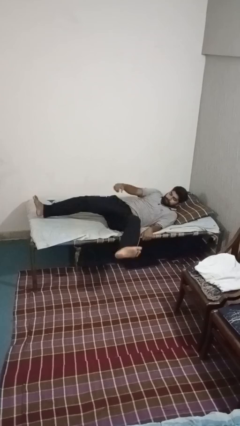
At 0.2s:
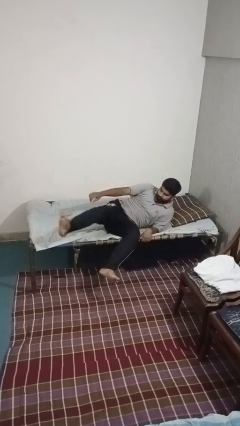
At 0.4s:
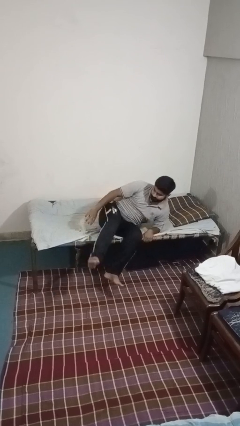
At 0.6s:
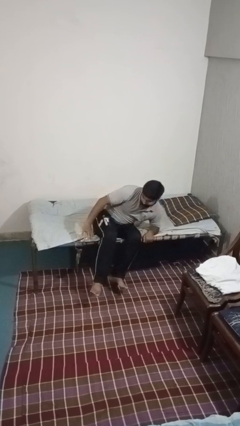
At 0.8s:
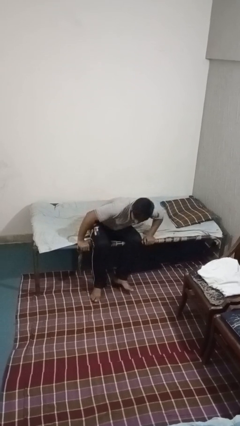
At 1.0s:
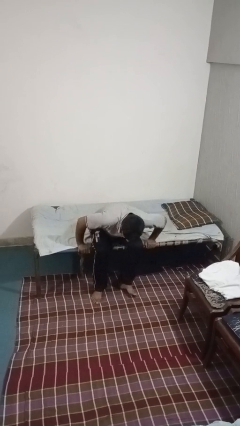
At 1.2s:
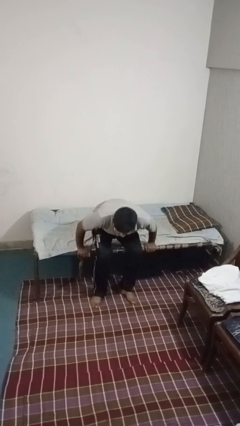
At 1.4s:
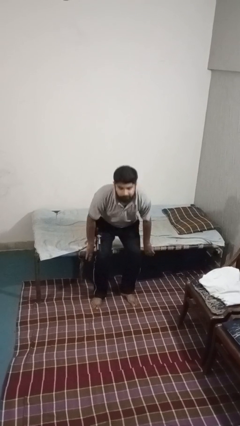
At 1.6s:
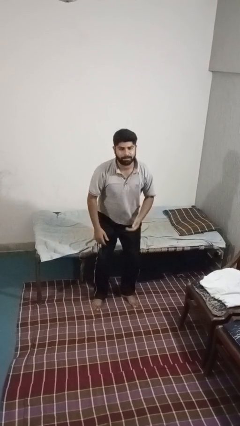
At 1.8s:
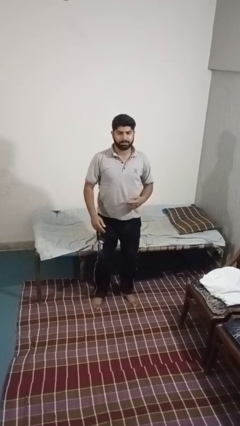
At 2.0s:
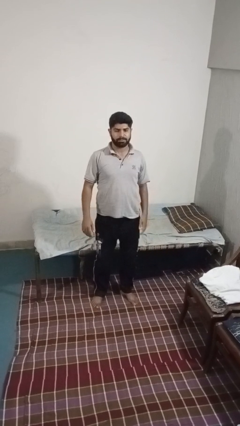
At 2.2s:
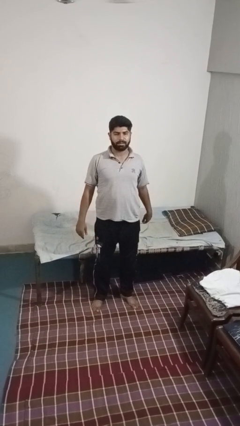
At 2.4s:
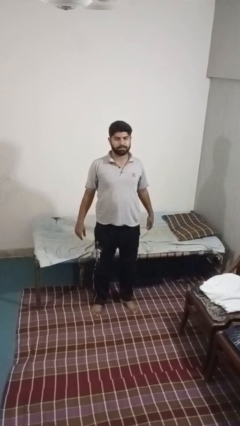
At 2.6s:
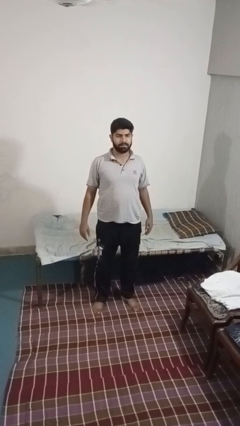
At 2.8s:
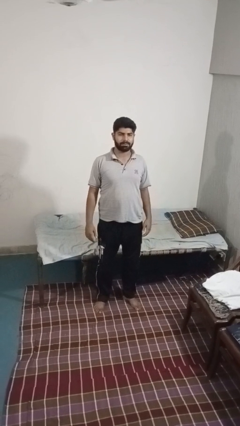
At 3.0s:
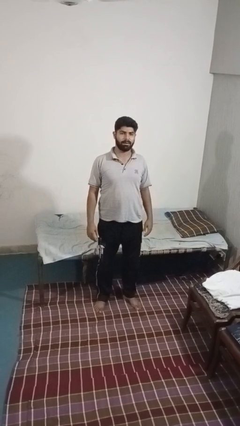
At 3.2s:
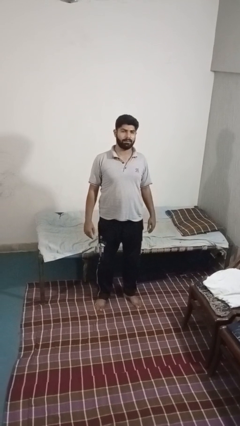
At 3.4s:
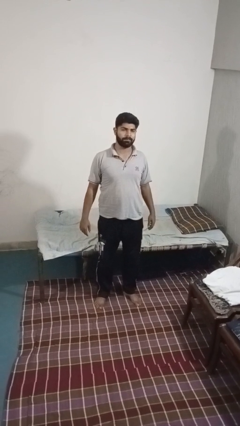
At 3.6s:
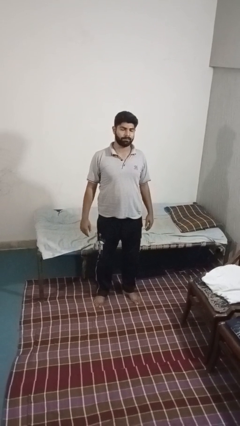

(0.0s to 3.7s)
person stands up

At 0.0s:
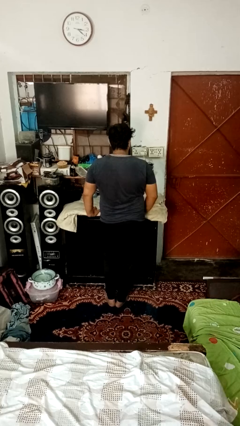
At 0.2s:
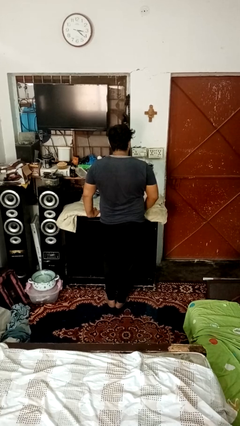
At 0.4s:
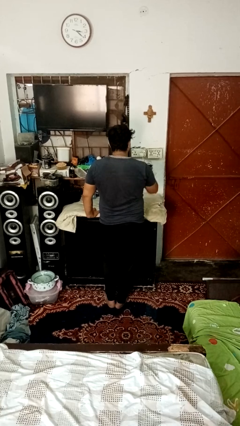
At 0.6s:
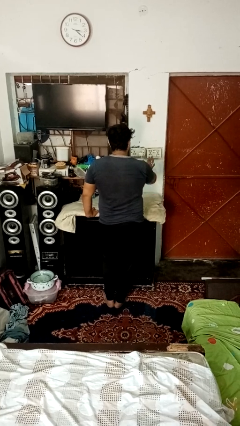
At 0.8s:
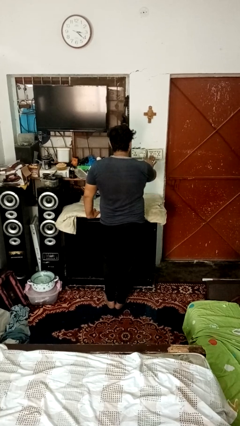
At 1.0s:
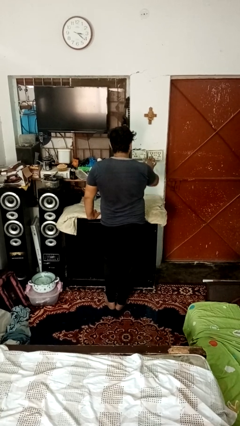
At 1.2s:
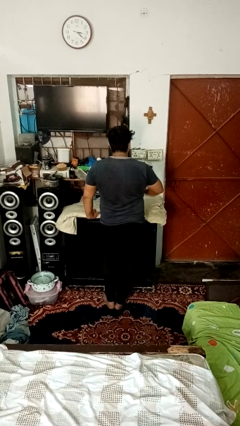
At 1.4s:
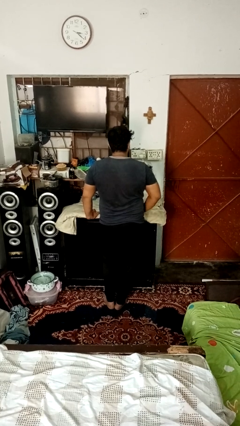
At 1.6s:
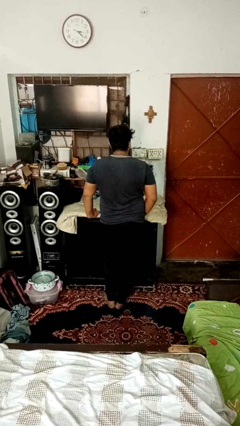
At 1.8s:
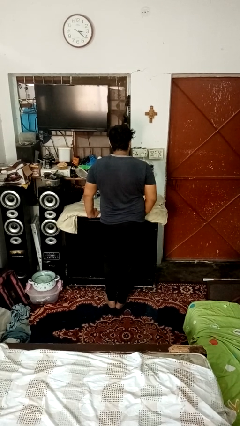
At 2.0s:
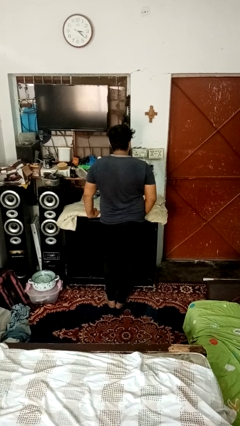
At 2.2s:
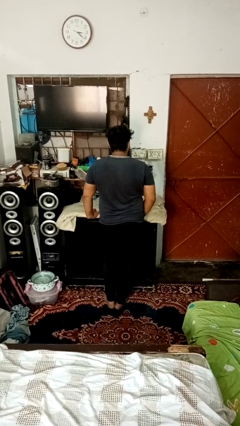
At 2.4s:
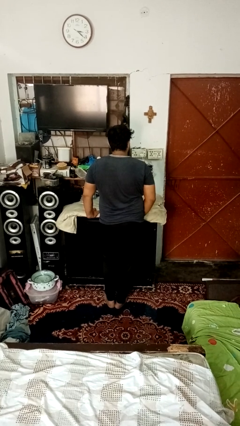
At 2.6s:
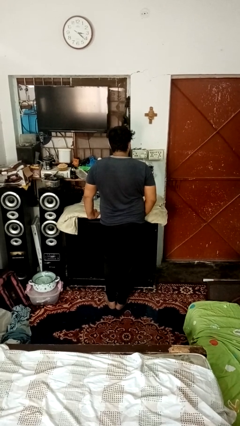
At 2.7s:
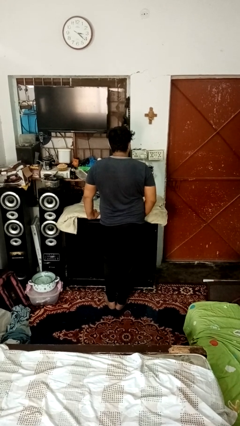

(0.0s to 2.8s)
person turns off fan

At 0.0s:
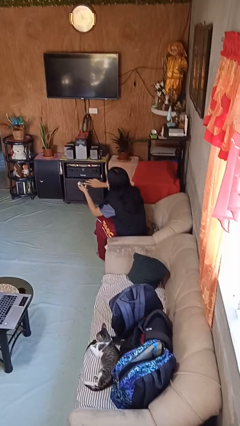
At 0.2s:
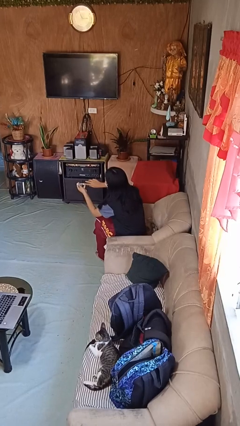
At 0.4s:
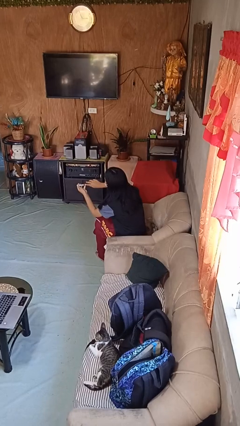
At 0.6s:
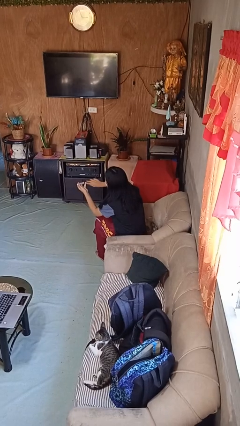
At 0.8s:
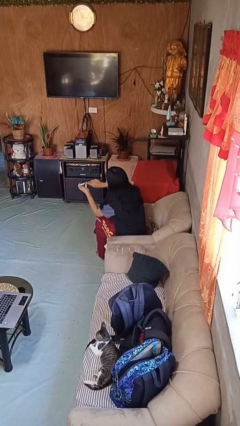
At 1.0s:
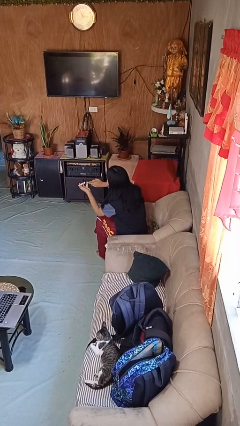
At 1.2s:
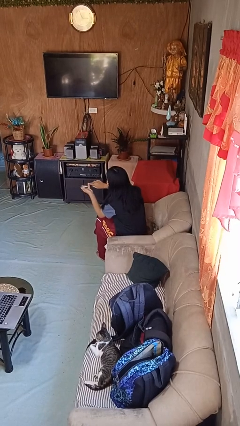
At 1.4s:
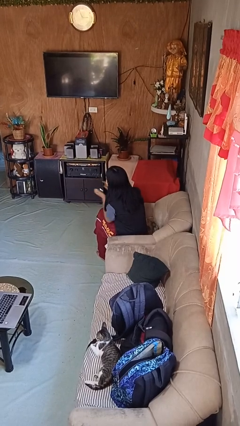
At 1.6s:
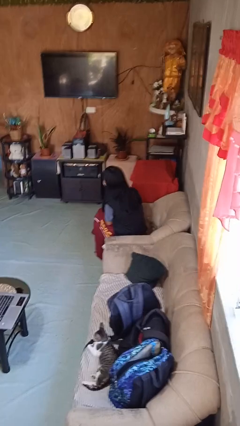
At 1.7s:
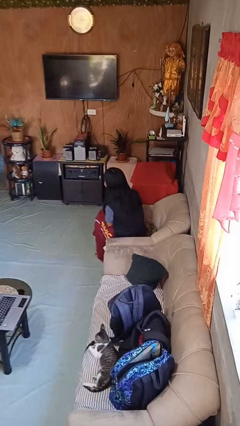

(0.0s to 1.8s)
person clips fingernails

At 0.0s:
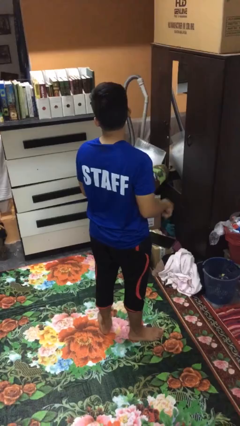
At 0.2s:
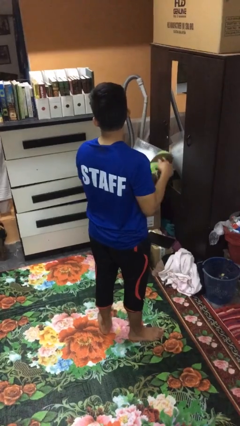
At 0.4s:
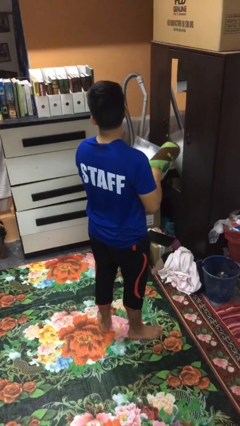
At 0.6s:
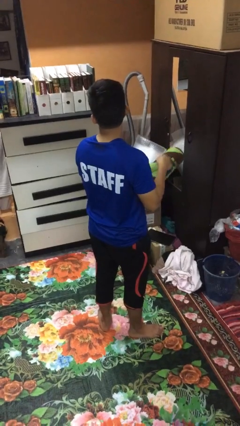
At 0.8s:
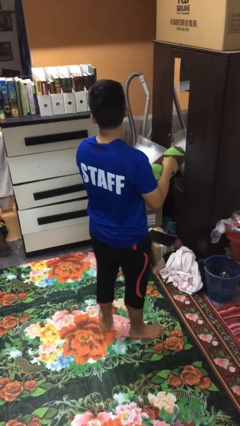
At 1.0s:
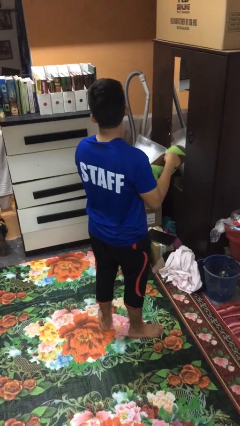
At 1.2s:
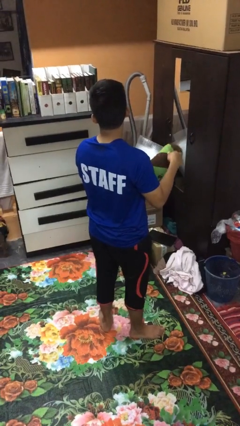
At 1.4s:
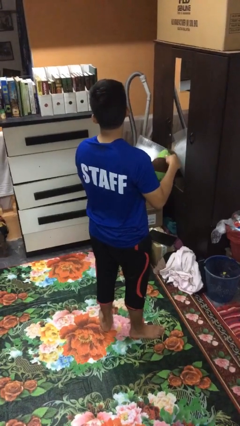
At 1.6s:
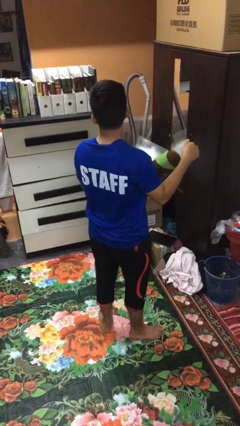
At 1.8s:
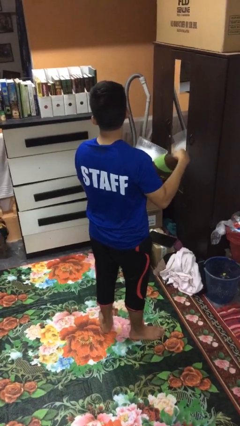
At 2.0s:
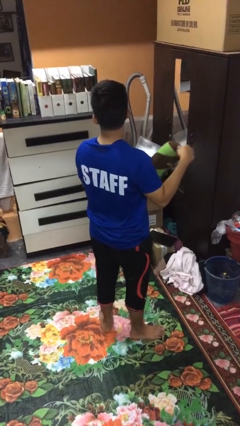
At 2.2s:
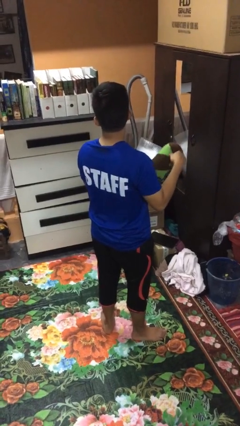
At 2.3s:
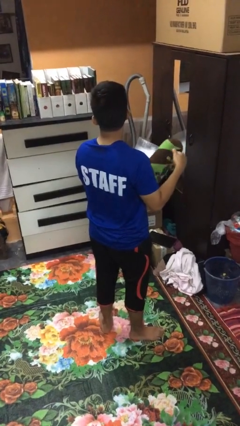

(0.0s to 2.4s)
person taps object with finger

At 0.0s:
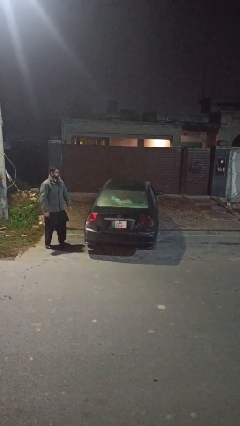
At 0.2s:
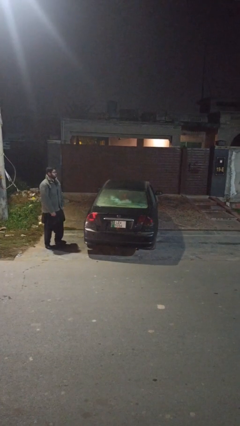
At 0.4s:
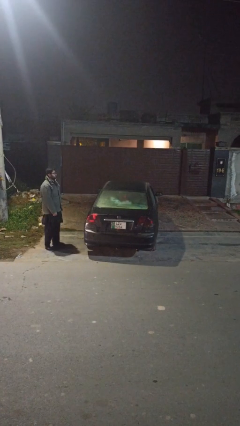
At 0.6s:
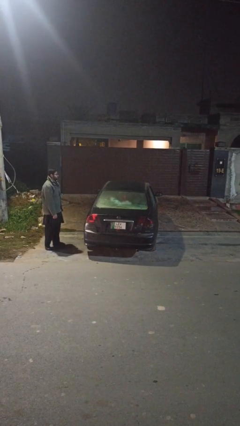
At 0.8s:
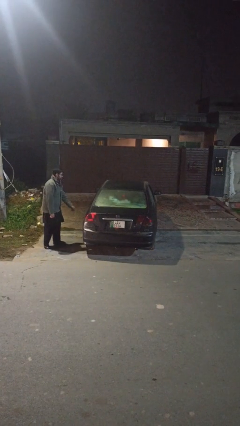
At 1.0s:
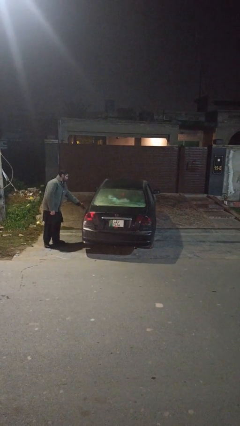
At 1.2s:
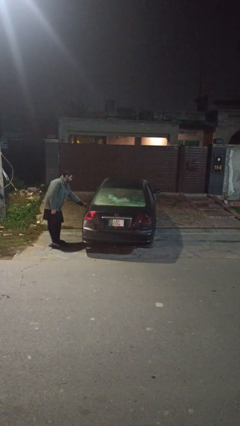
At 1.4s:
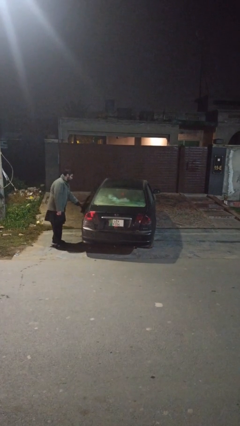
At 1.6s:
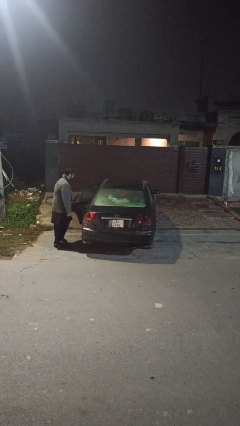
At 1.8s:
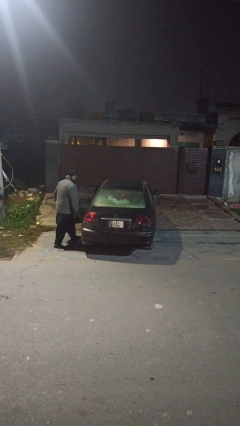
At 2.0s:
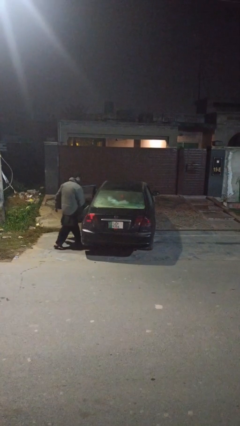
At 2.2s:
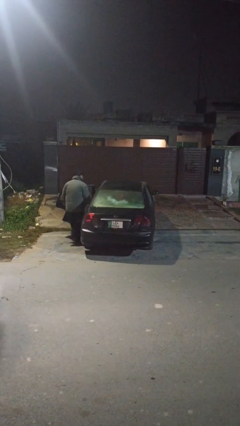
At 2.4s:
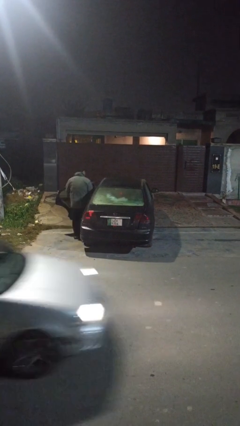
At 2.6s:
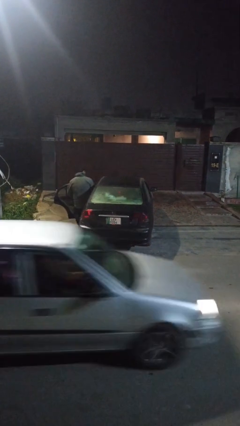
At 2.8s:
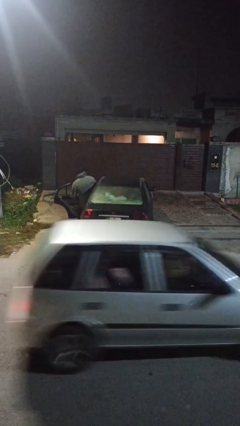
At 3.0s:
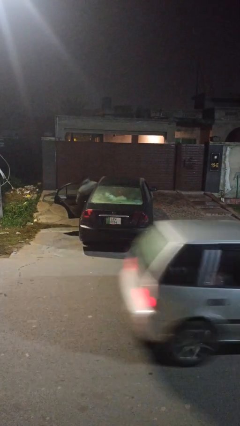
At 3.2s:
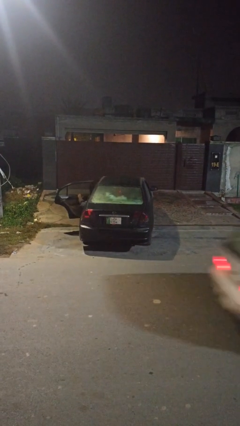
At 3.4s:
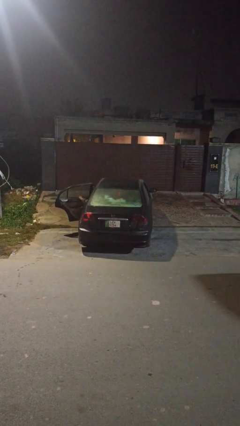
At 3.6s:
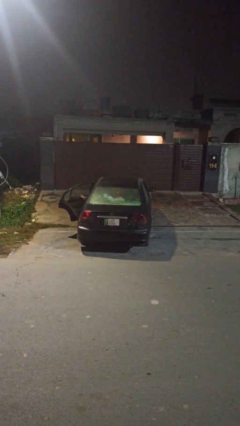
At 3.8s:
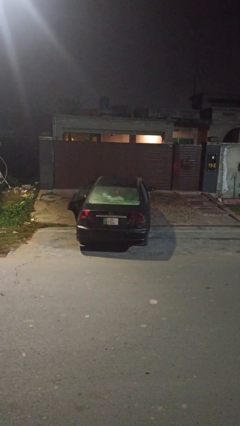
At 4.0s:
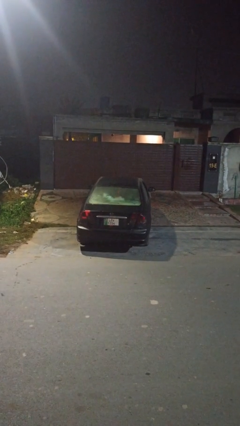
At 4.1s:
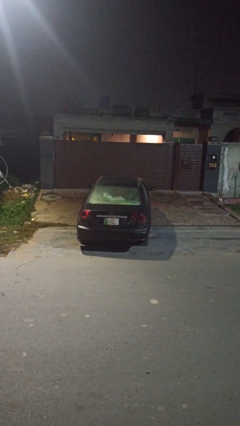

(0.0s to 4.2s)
car picks up person

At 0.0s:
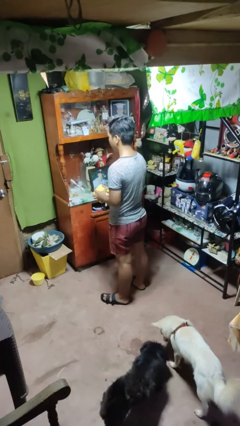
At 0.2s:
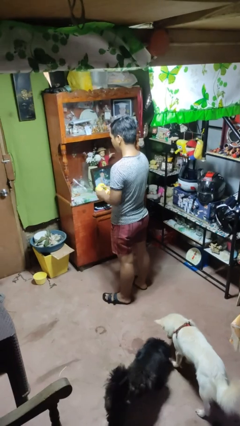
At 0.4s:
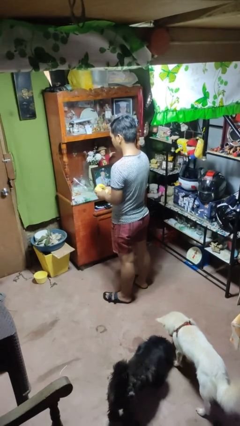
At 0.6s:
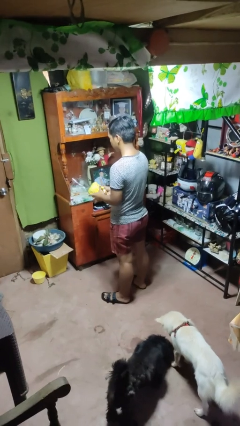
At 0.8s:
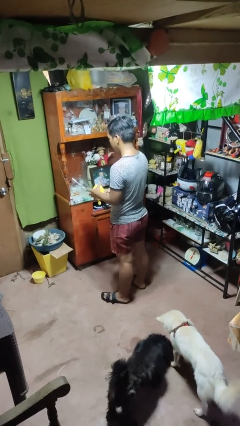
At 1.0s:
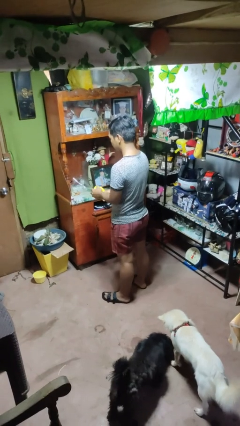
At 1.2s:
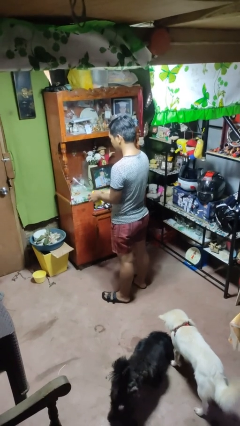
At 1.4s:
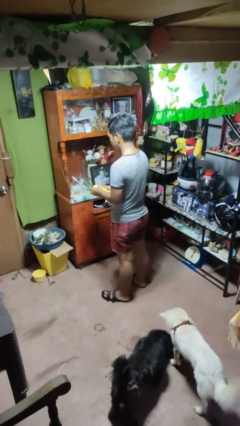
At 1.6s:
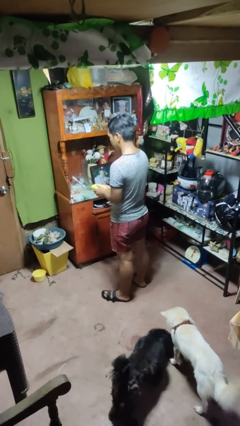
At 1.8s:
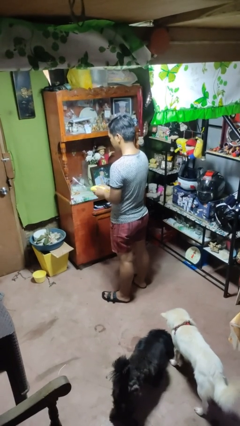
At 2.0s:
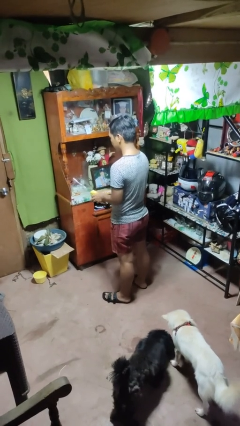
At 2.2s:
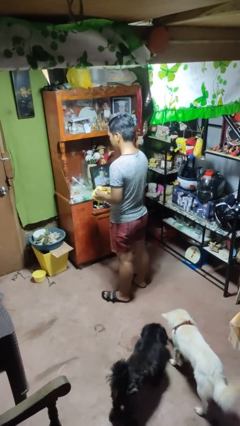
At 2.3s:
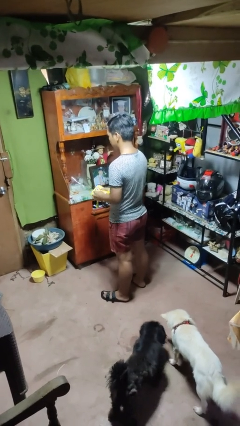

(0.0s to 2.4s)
person squeezes object

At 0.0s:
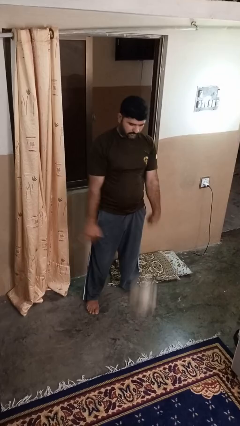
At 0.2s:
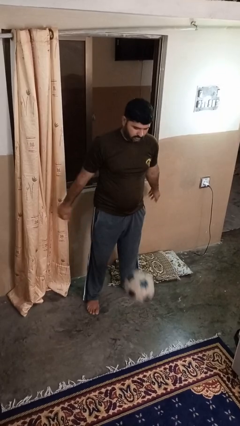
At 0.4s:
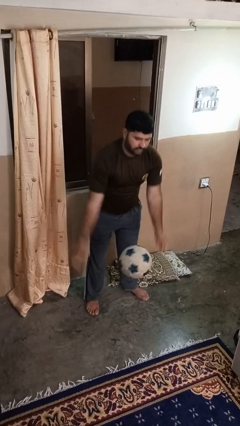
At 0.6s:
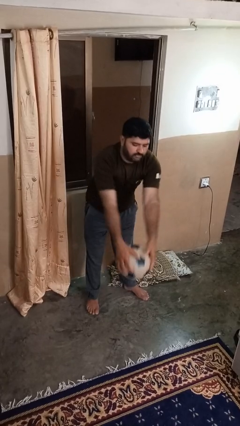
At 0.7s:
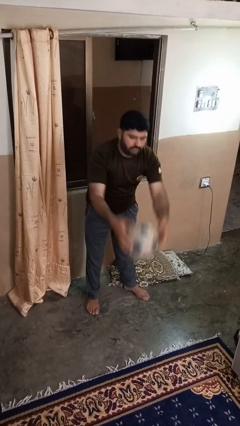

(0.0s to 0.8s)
person bounces ball on floor
